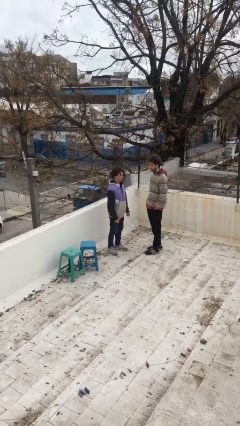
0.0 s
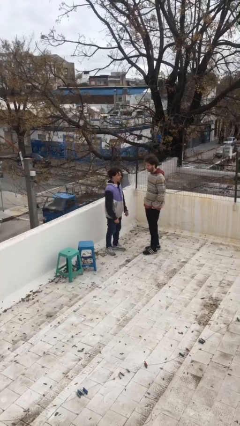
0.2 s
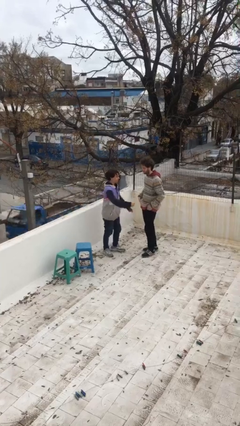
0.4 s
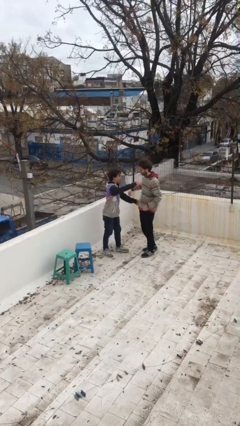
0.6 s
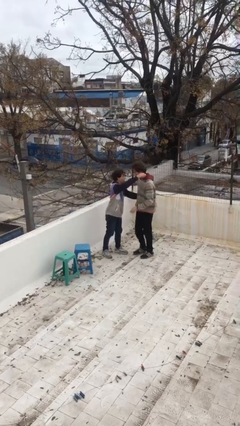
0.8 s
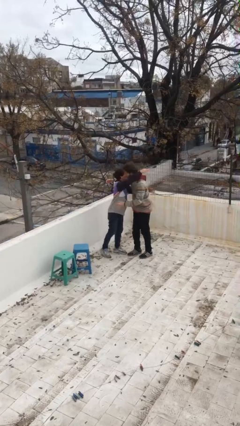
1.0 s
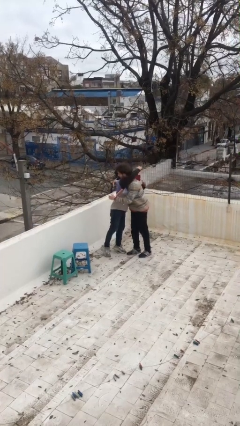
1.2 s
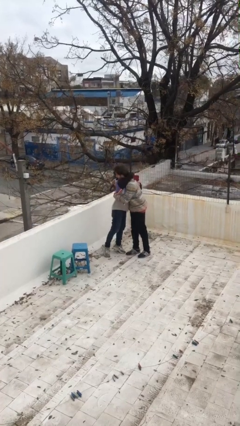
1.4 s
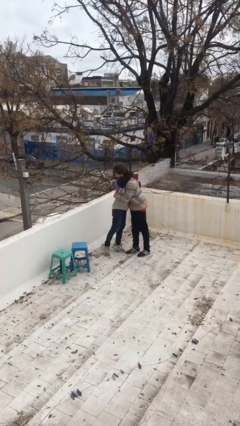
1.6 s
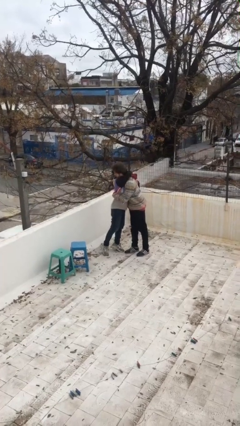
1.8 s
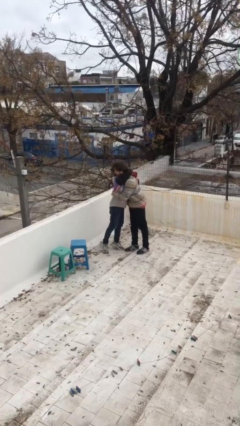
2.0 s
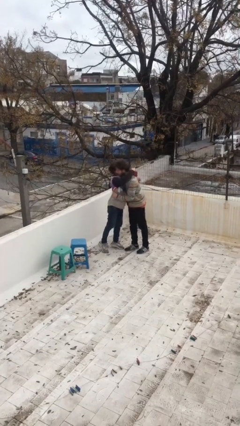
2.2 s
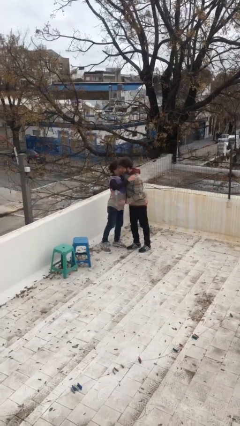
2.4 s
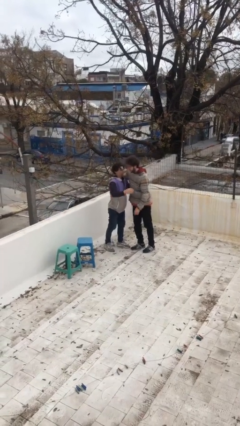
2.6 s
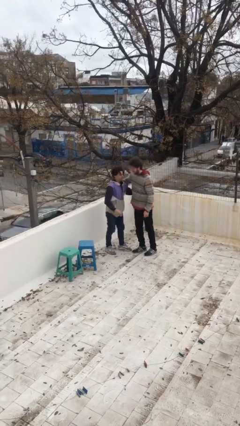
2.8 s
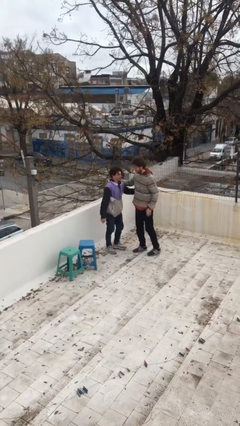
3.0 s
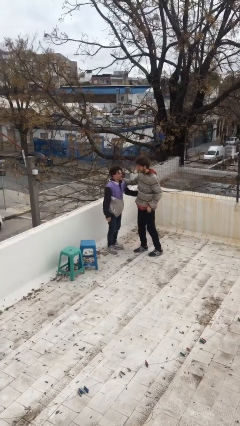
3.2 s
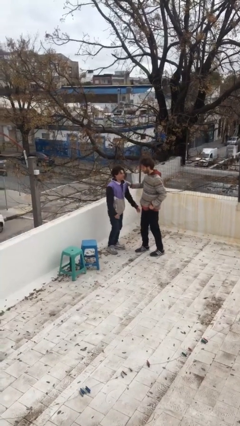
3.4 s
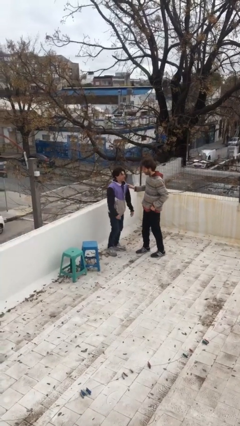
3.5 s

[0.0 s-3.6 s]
person embraces person

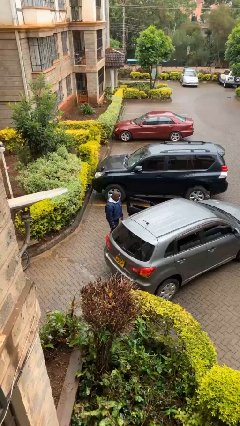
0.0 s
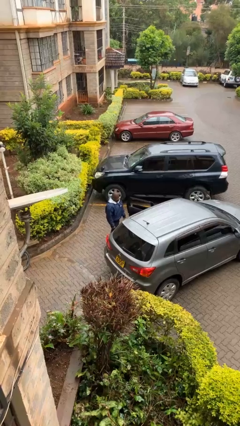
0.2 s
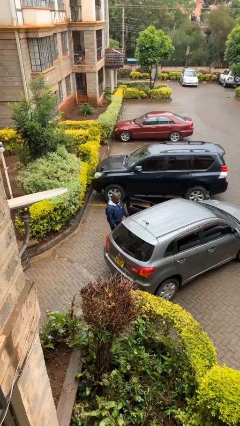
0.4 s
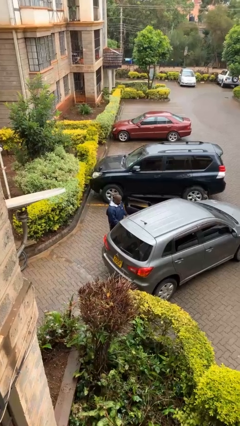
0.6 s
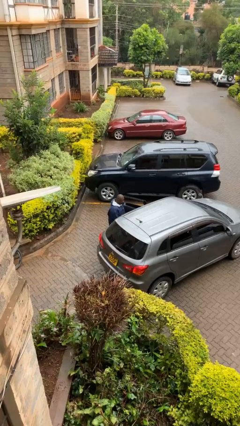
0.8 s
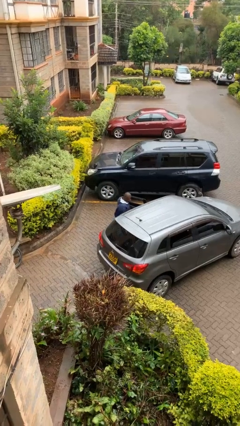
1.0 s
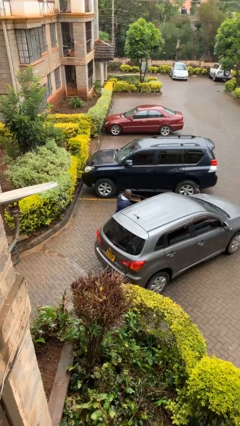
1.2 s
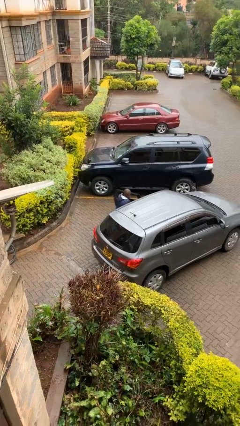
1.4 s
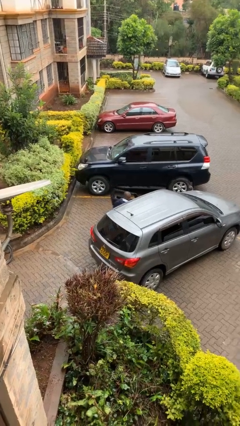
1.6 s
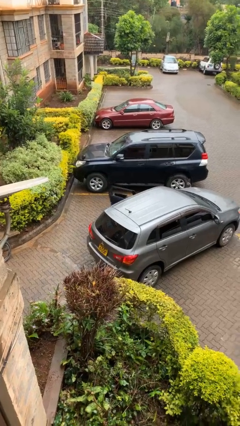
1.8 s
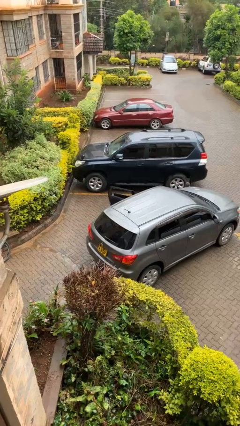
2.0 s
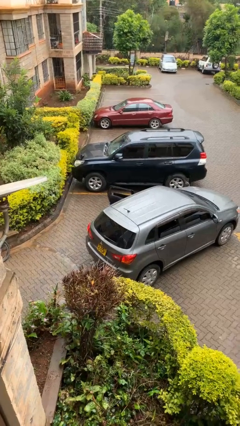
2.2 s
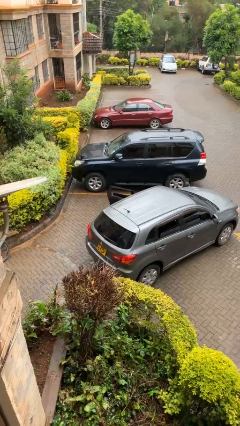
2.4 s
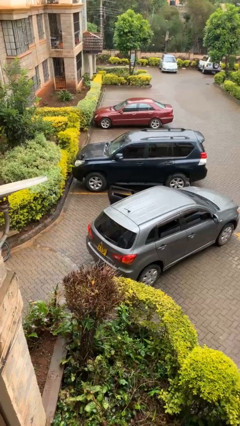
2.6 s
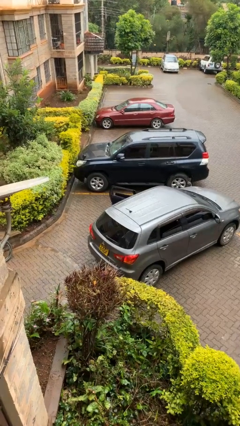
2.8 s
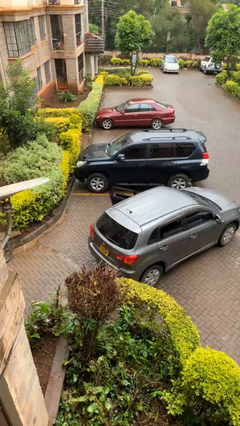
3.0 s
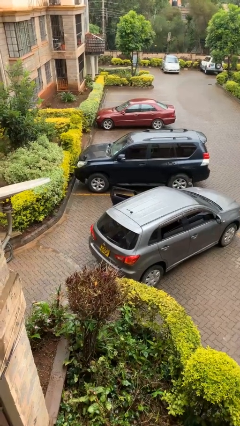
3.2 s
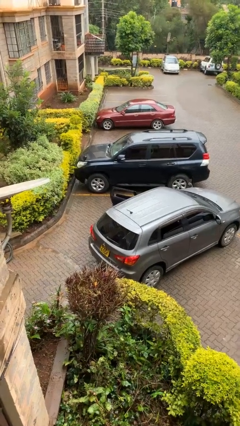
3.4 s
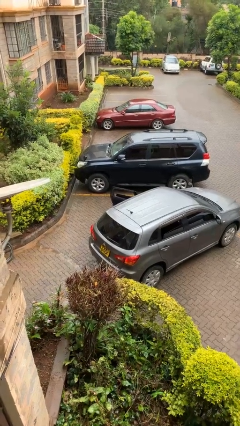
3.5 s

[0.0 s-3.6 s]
person enters car

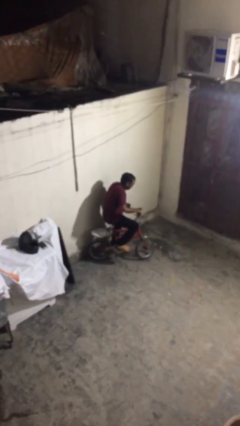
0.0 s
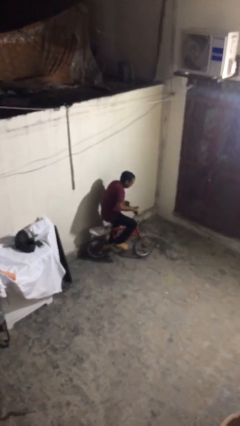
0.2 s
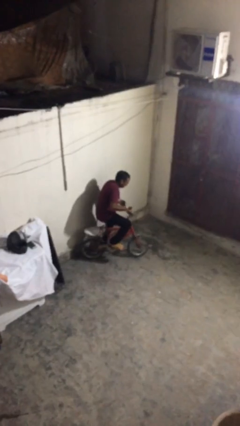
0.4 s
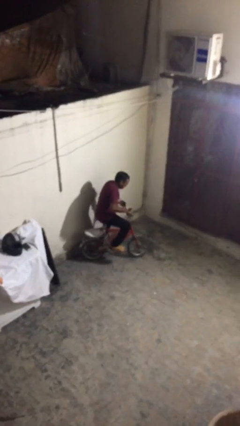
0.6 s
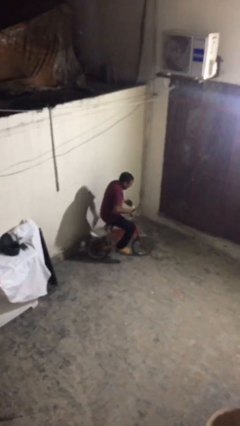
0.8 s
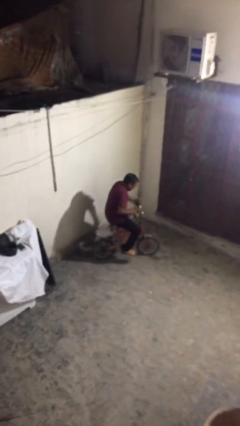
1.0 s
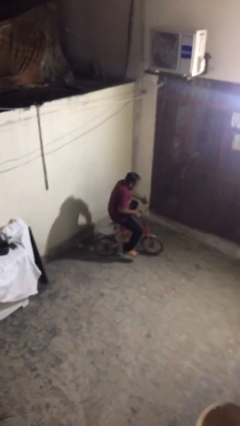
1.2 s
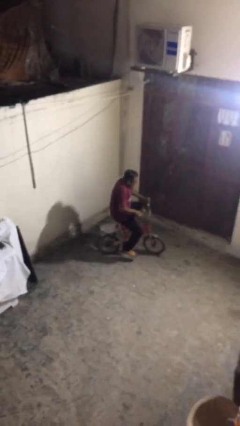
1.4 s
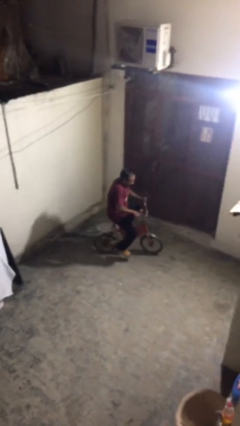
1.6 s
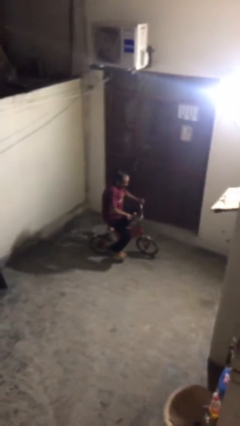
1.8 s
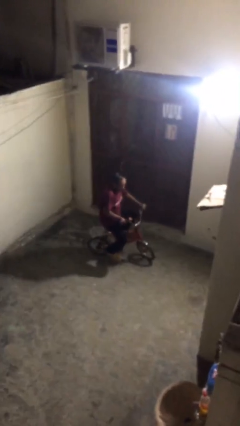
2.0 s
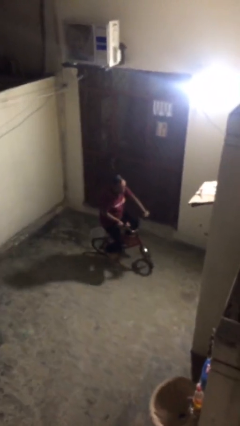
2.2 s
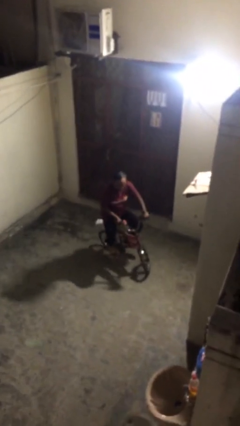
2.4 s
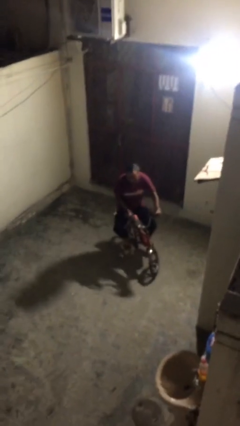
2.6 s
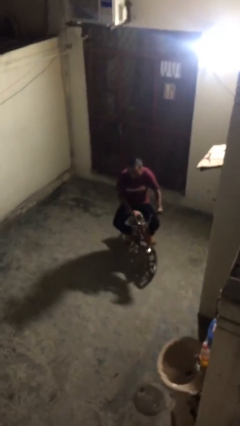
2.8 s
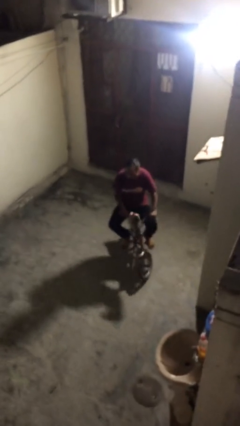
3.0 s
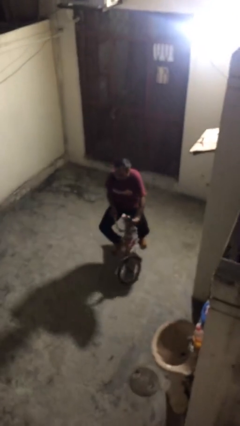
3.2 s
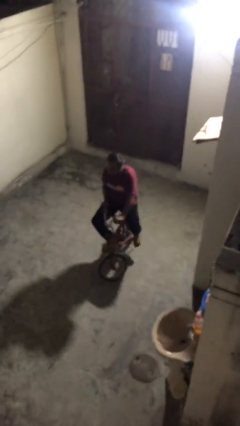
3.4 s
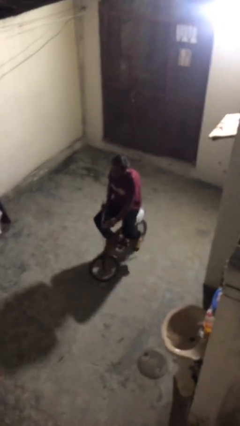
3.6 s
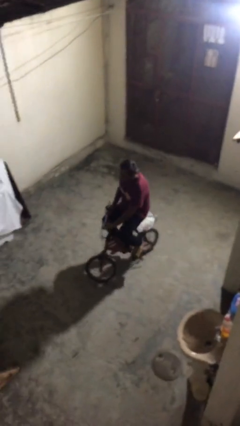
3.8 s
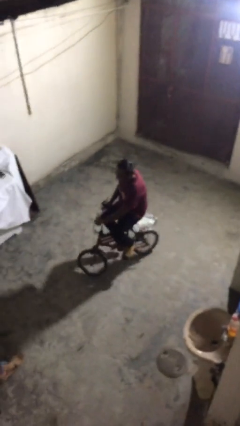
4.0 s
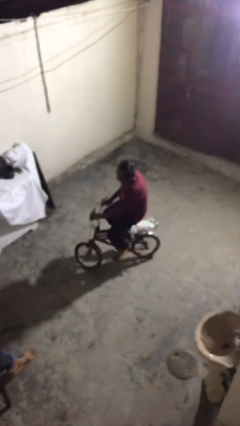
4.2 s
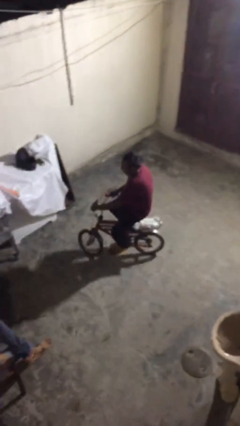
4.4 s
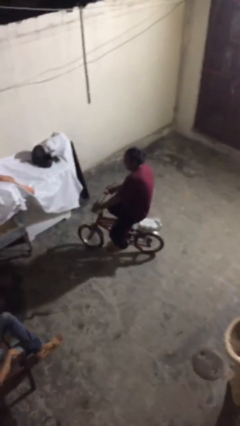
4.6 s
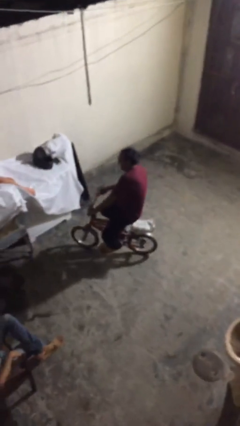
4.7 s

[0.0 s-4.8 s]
person rides bicycle

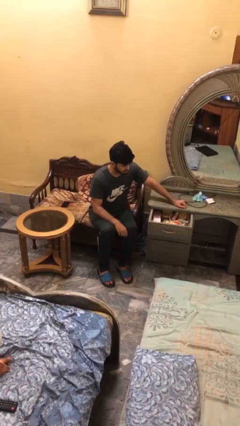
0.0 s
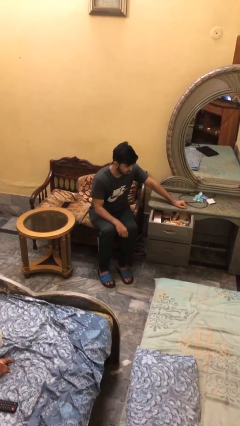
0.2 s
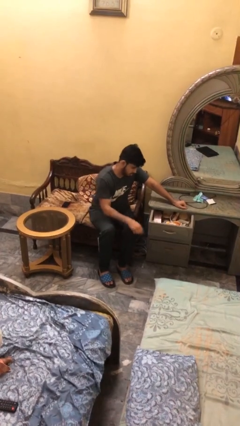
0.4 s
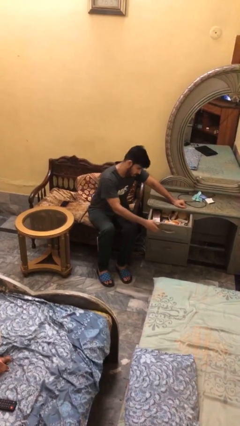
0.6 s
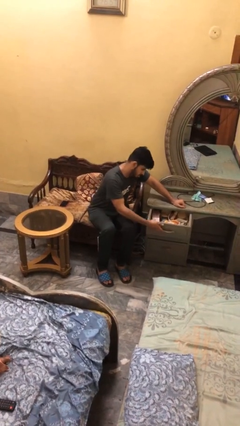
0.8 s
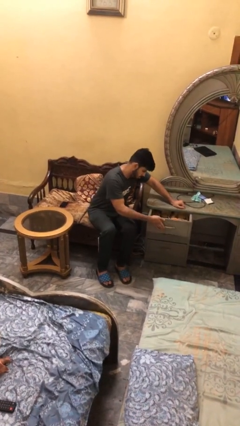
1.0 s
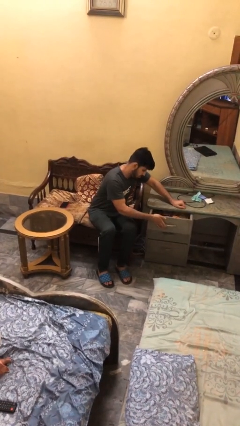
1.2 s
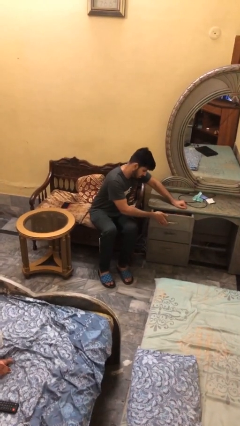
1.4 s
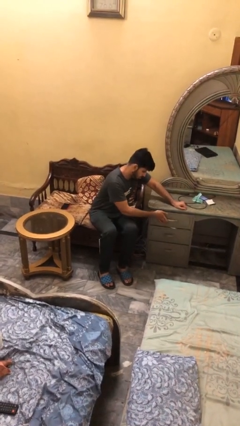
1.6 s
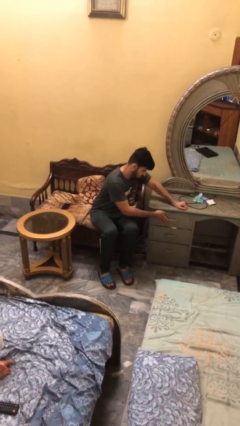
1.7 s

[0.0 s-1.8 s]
person closes dresser drawer

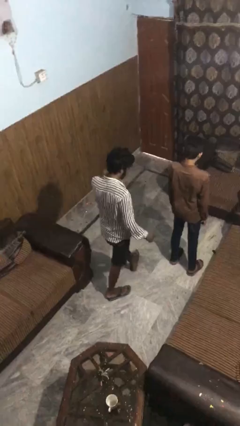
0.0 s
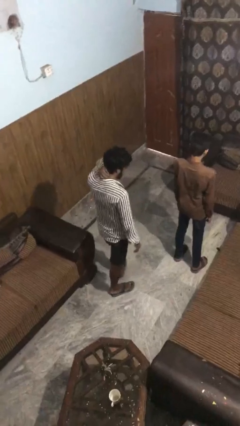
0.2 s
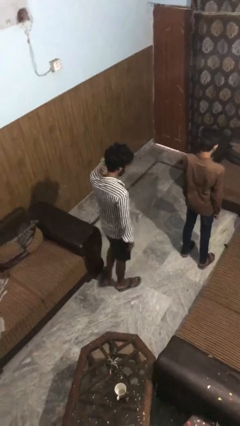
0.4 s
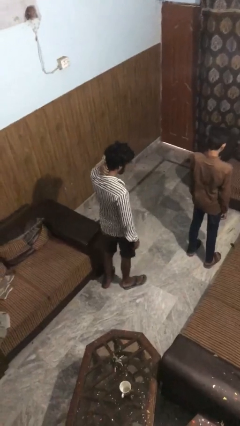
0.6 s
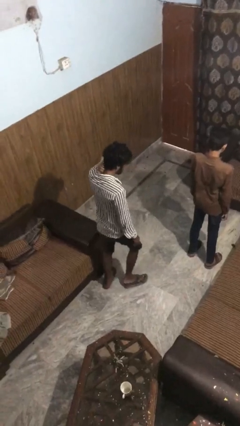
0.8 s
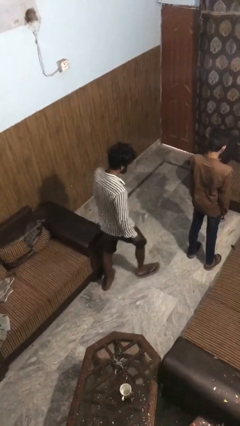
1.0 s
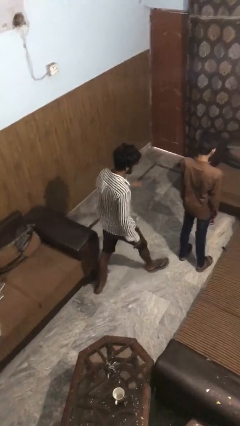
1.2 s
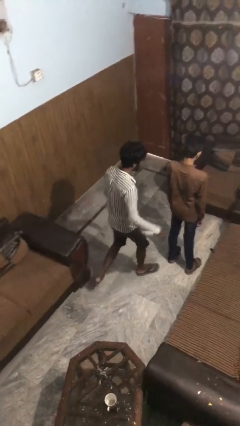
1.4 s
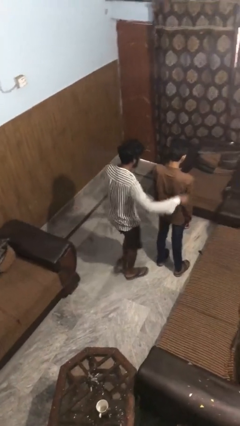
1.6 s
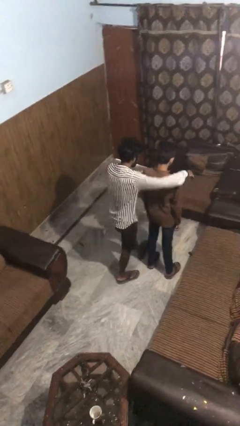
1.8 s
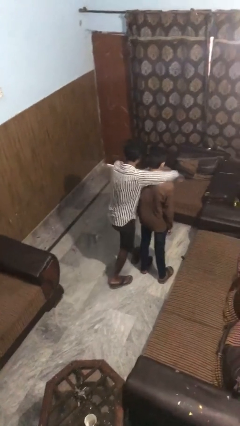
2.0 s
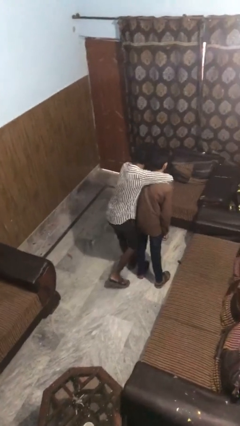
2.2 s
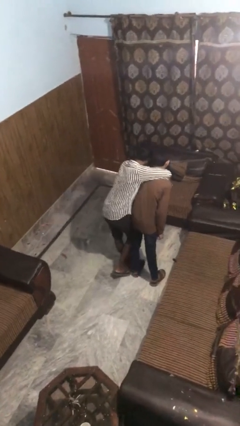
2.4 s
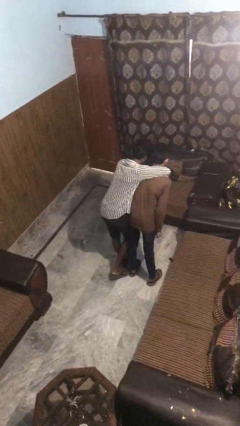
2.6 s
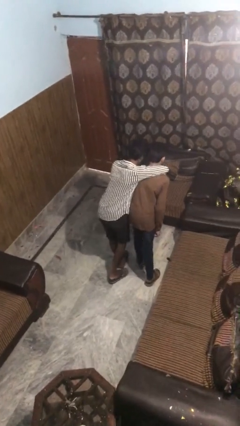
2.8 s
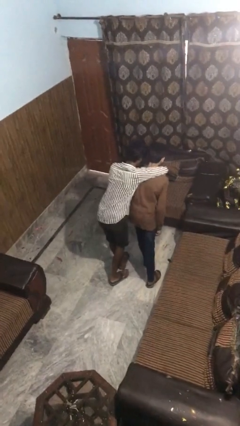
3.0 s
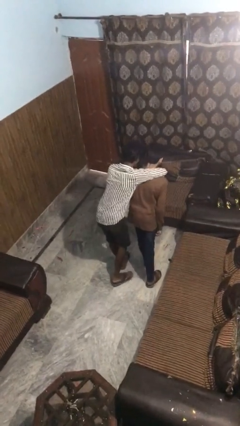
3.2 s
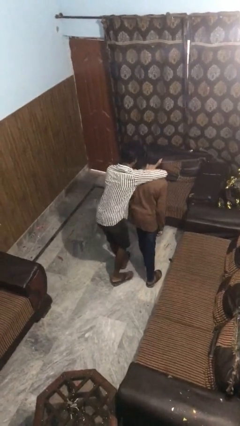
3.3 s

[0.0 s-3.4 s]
person hugs person from behind

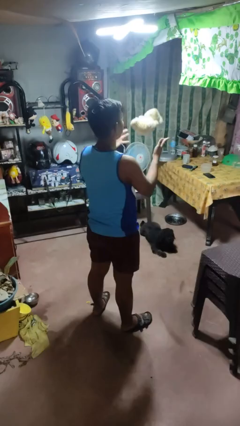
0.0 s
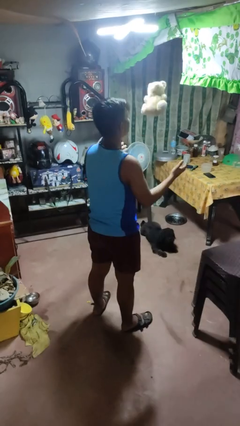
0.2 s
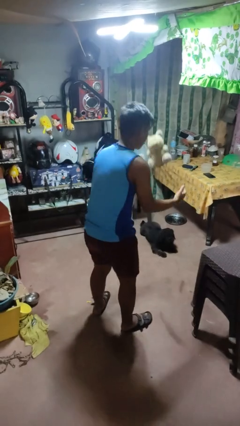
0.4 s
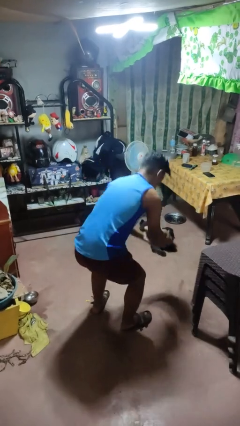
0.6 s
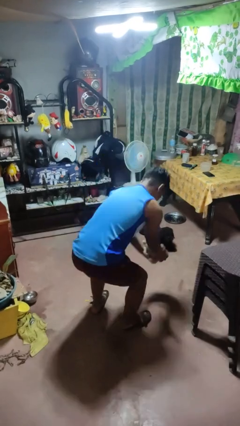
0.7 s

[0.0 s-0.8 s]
person drops object
